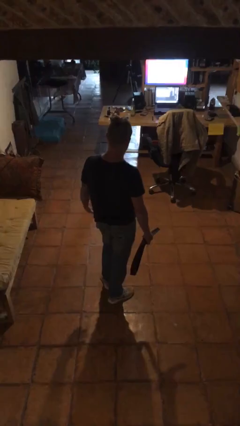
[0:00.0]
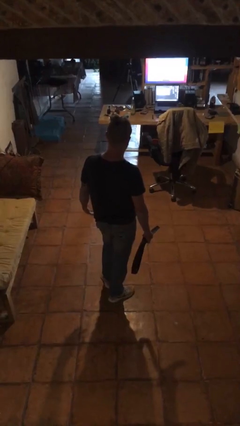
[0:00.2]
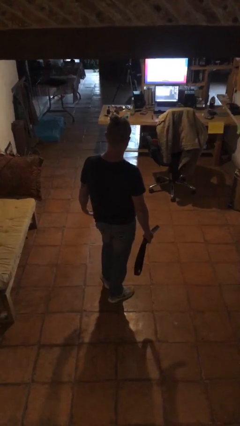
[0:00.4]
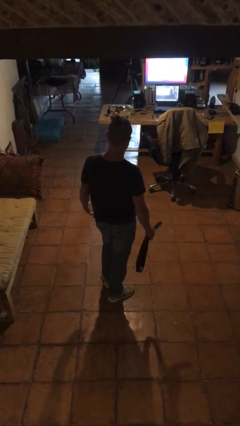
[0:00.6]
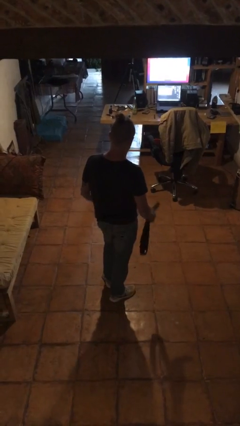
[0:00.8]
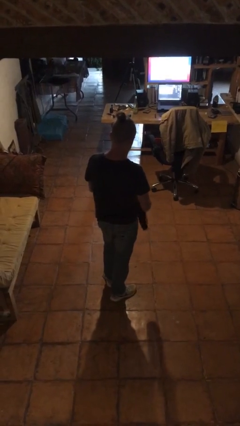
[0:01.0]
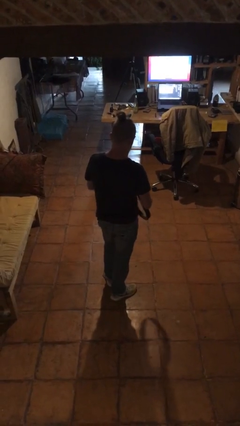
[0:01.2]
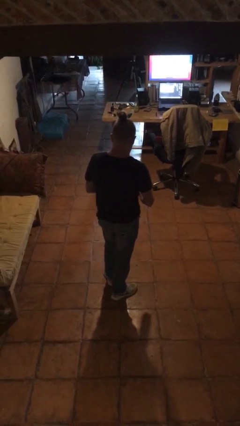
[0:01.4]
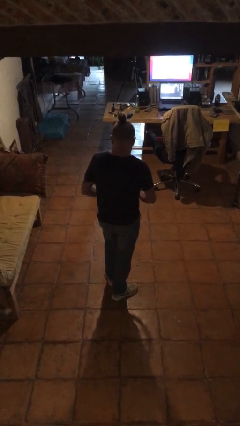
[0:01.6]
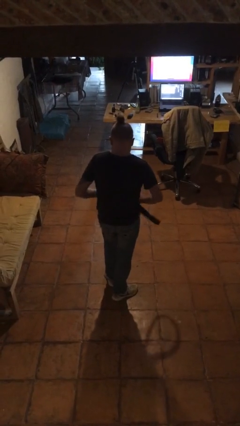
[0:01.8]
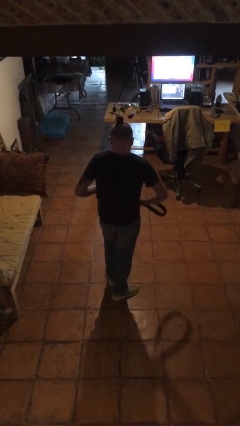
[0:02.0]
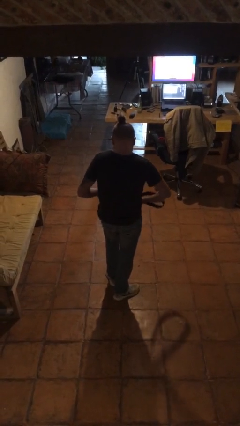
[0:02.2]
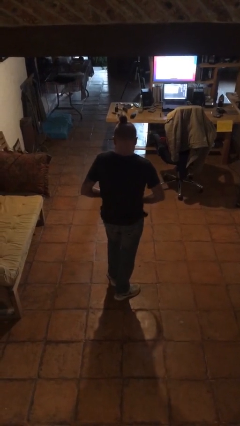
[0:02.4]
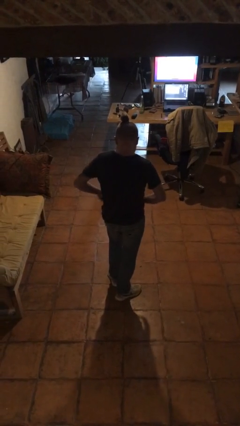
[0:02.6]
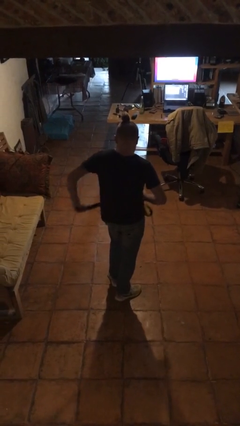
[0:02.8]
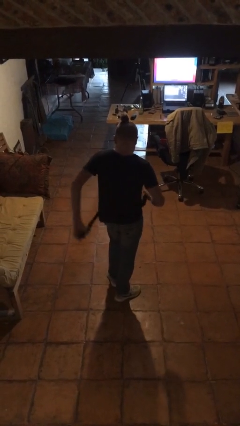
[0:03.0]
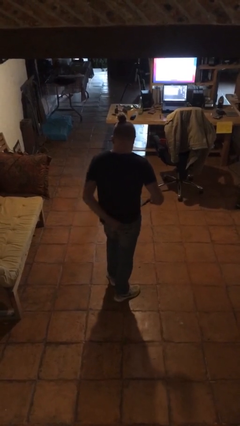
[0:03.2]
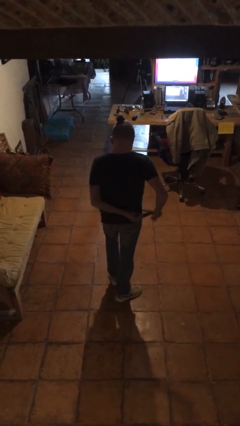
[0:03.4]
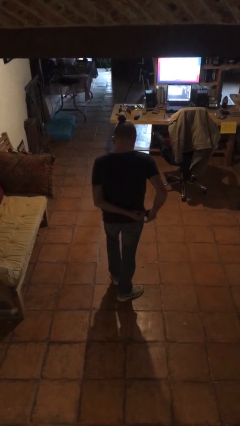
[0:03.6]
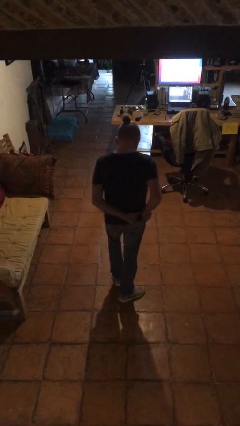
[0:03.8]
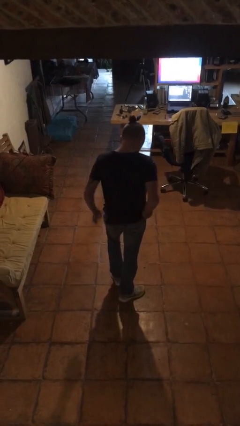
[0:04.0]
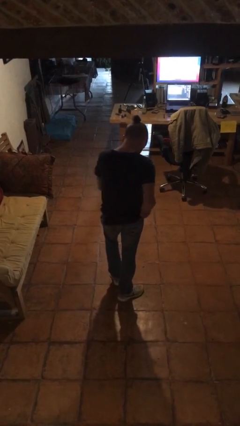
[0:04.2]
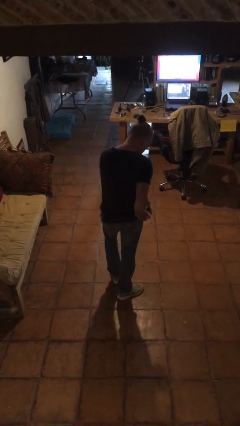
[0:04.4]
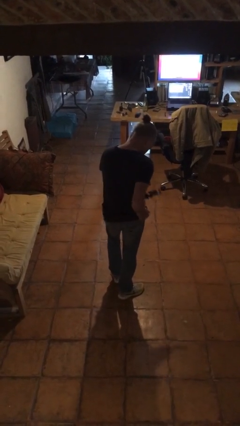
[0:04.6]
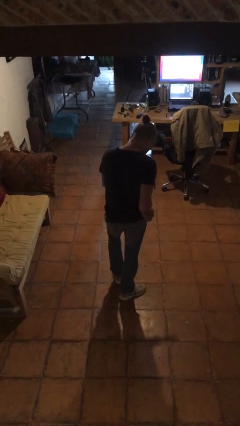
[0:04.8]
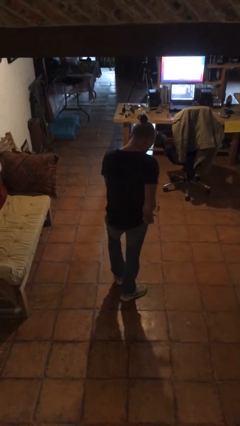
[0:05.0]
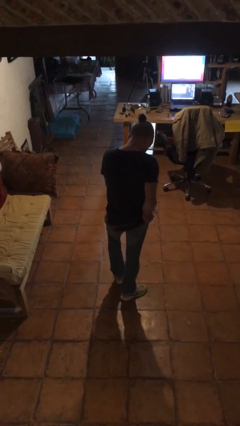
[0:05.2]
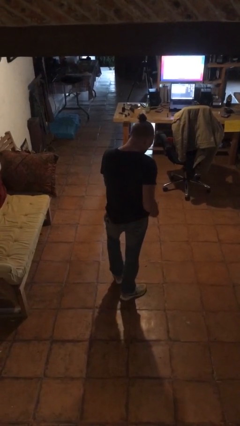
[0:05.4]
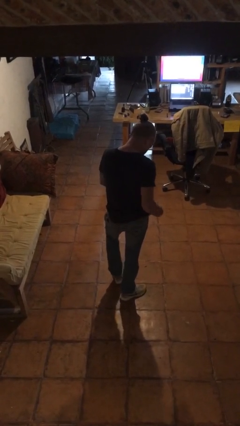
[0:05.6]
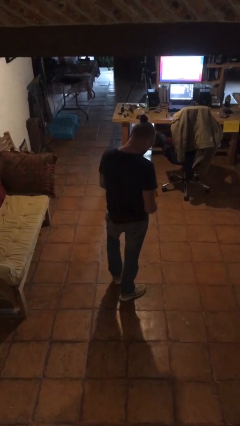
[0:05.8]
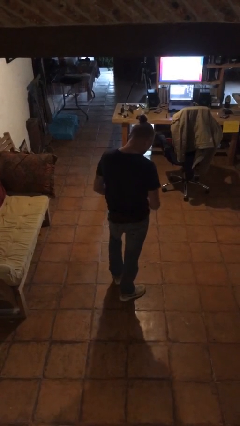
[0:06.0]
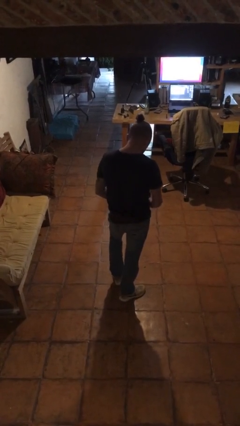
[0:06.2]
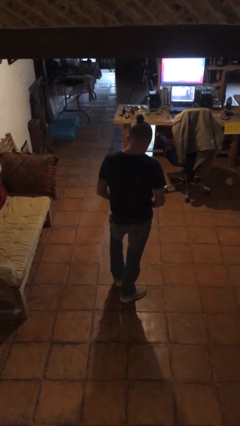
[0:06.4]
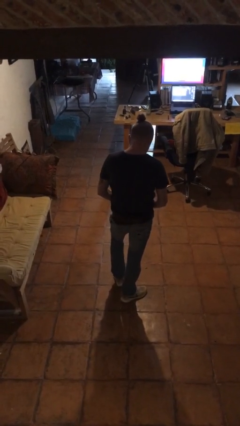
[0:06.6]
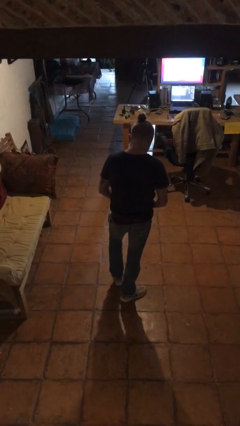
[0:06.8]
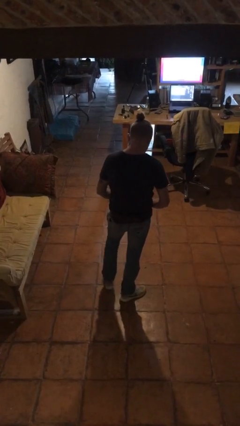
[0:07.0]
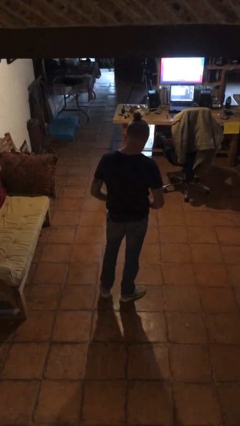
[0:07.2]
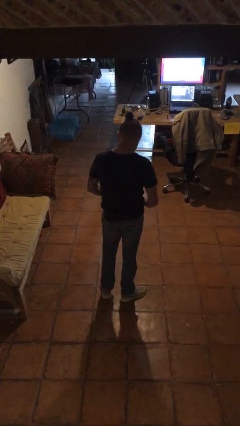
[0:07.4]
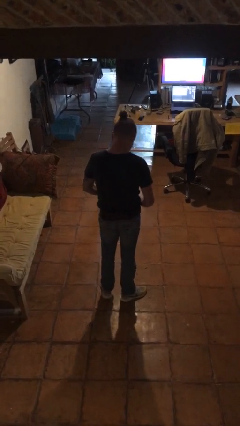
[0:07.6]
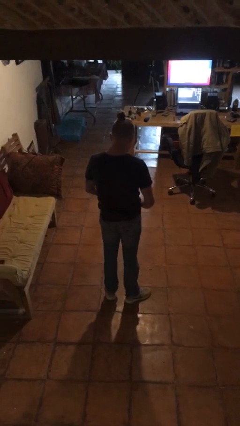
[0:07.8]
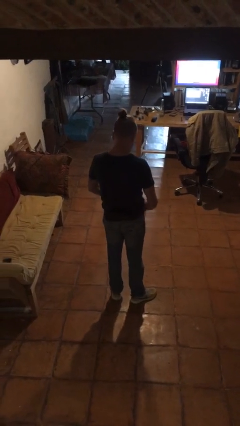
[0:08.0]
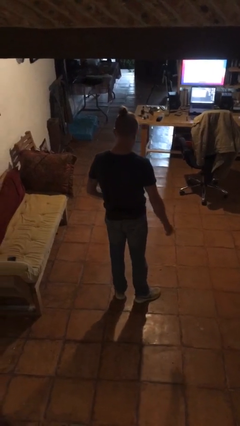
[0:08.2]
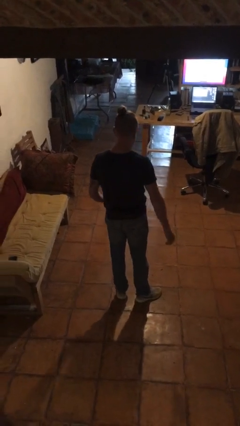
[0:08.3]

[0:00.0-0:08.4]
person puts on belt

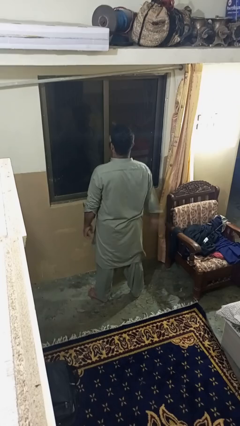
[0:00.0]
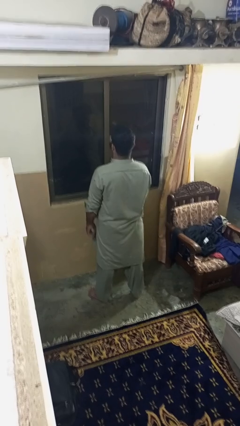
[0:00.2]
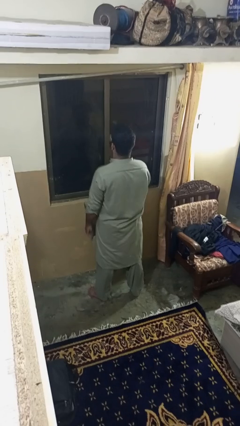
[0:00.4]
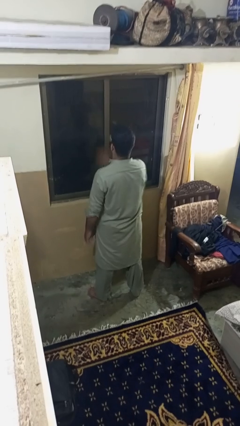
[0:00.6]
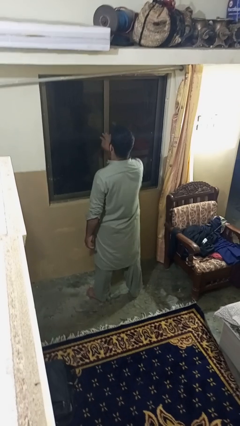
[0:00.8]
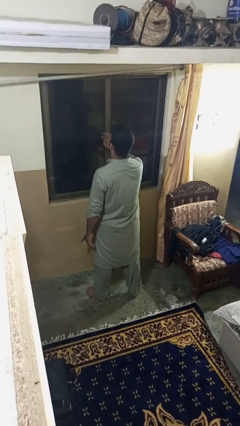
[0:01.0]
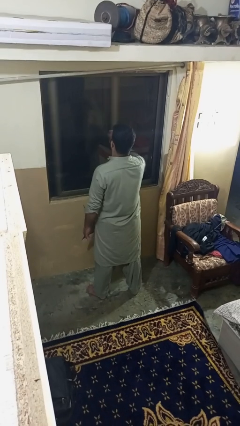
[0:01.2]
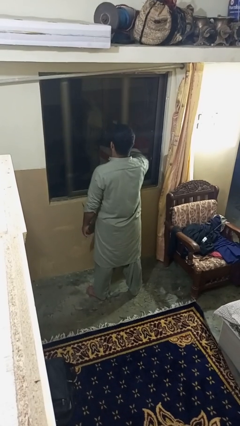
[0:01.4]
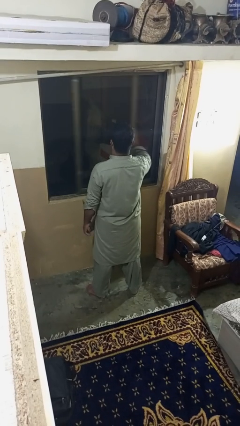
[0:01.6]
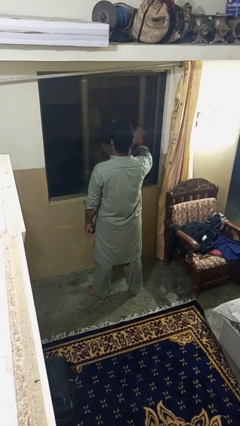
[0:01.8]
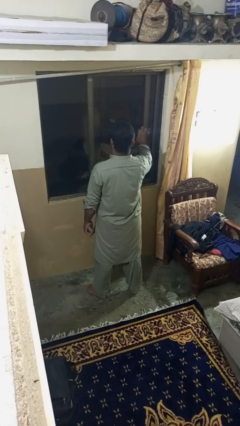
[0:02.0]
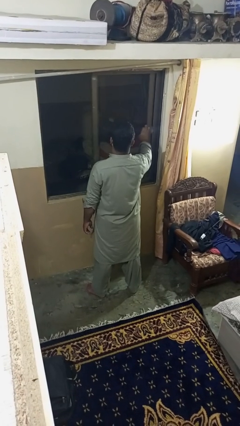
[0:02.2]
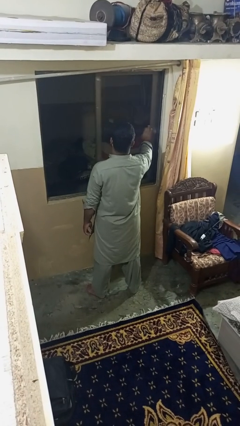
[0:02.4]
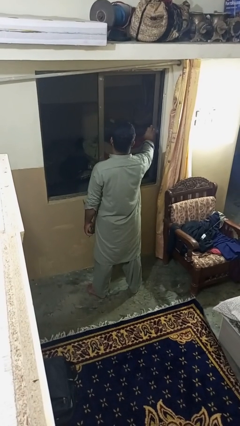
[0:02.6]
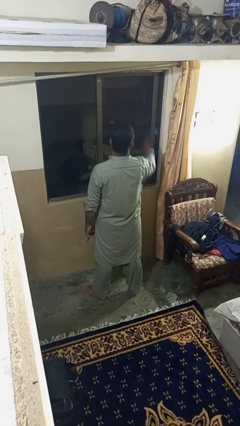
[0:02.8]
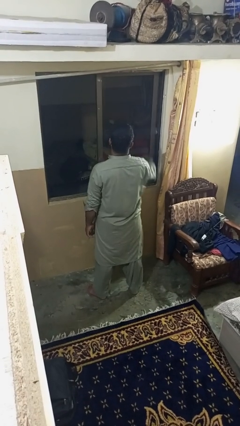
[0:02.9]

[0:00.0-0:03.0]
person opens home window

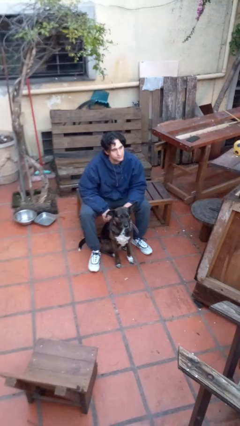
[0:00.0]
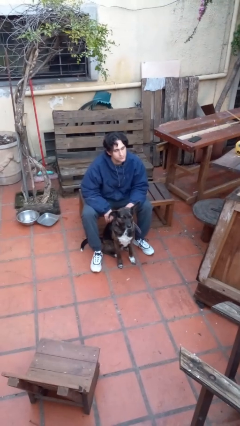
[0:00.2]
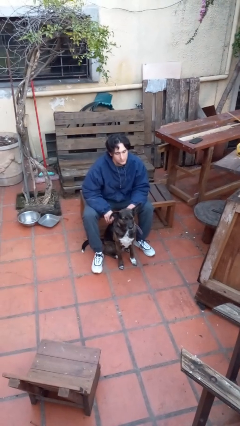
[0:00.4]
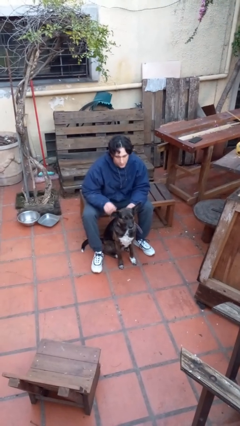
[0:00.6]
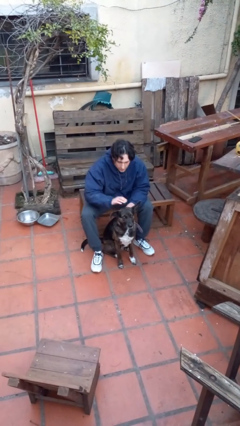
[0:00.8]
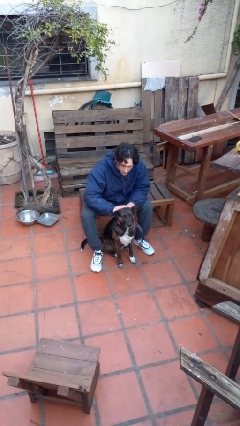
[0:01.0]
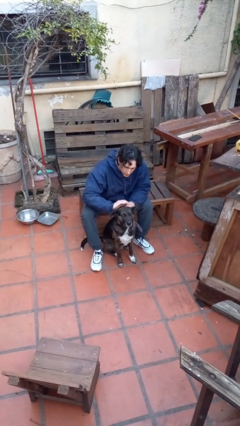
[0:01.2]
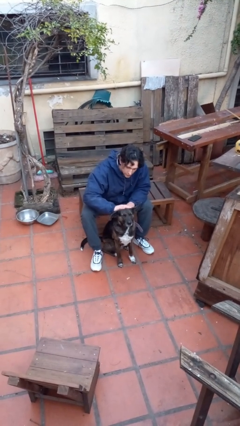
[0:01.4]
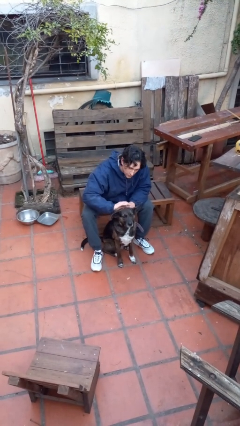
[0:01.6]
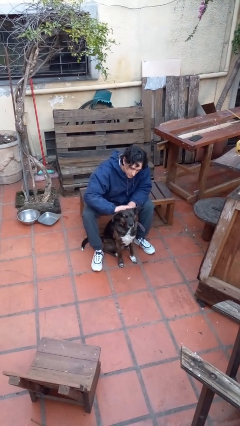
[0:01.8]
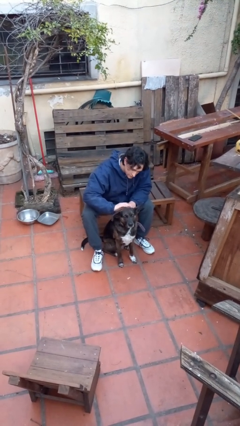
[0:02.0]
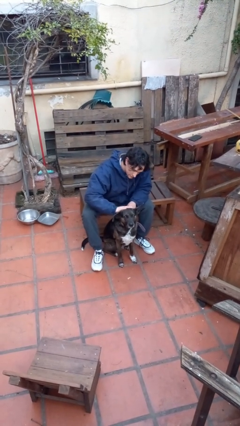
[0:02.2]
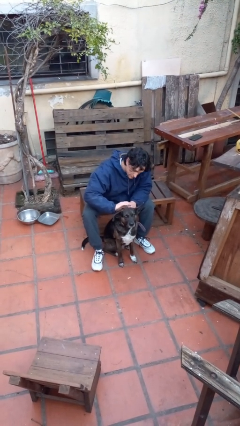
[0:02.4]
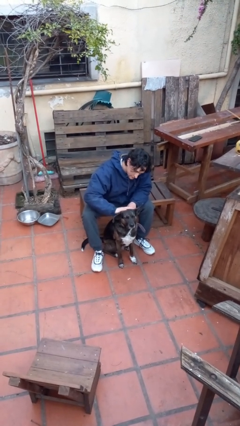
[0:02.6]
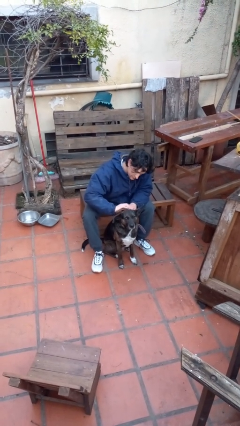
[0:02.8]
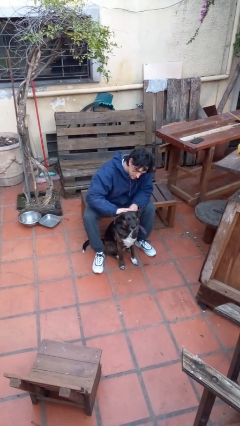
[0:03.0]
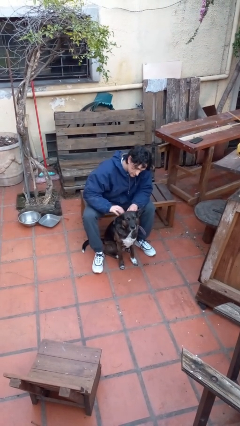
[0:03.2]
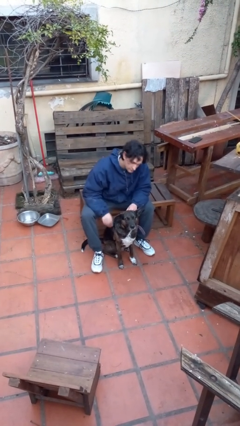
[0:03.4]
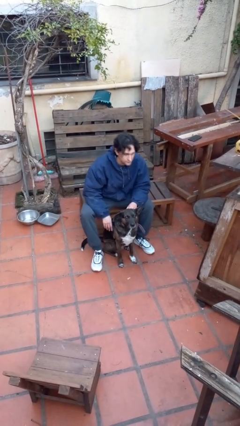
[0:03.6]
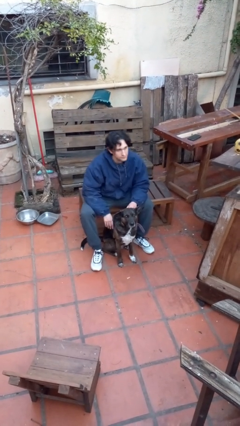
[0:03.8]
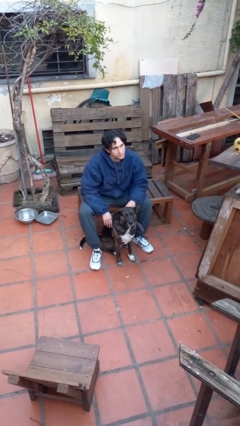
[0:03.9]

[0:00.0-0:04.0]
person pets dog

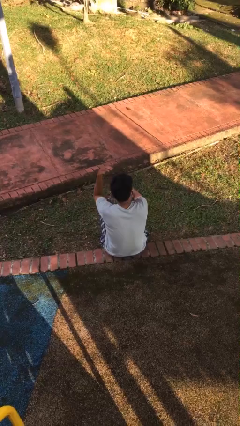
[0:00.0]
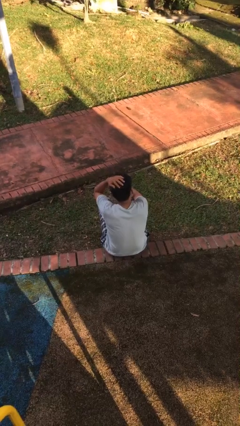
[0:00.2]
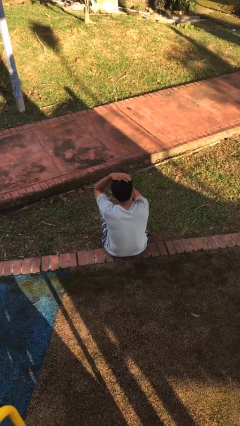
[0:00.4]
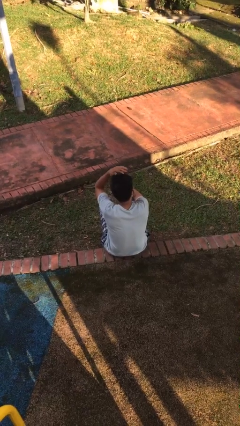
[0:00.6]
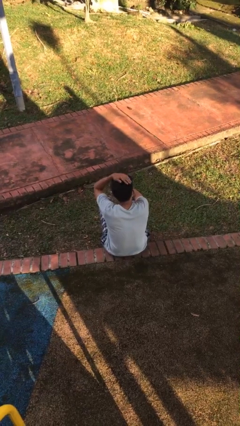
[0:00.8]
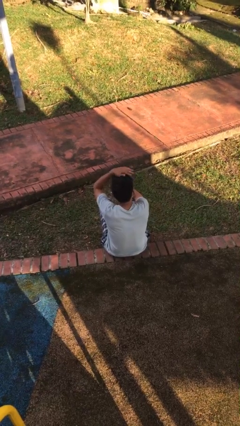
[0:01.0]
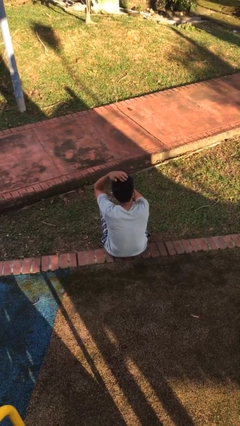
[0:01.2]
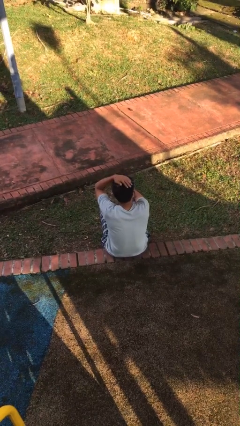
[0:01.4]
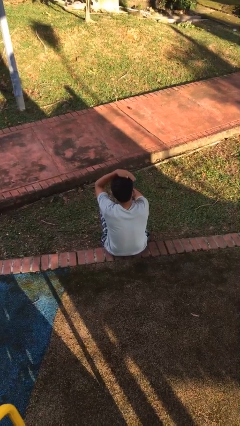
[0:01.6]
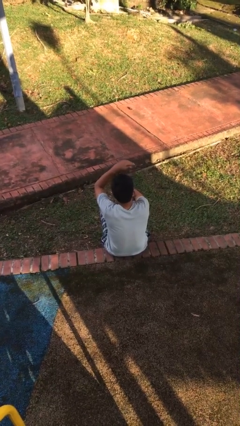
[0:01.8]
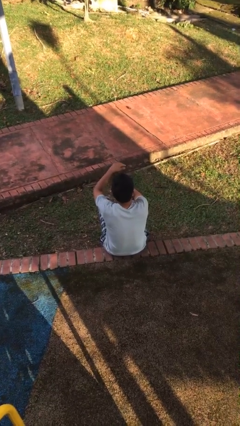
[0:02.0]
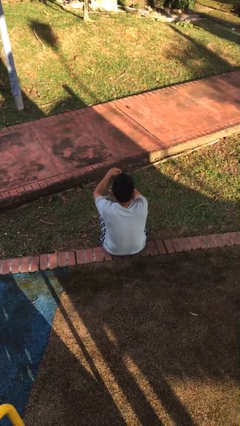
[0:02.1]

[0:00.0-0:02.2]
person pats head
